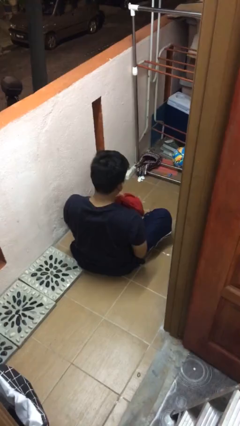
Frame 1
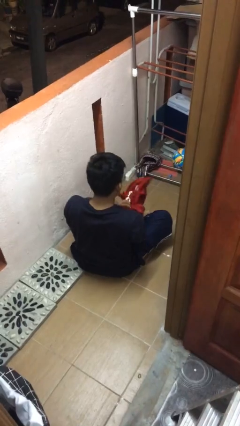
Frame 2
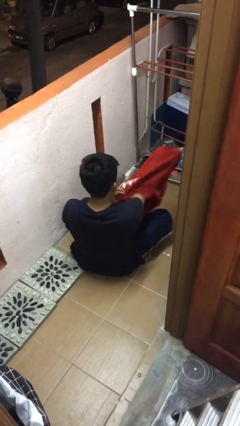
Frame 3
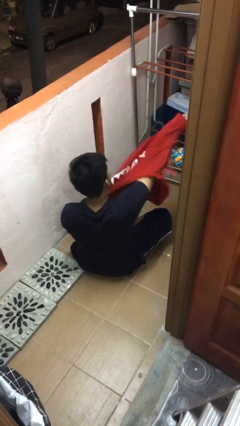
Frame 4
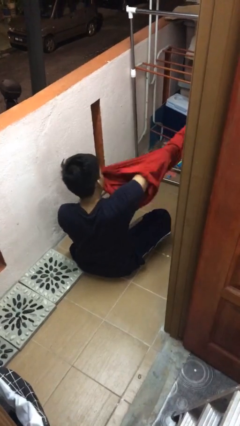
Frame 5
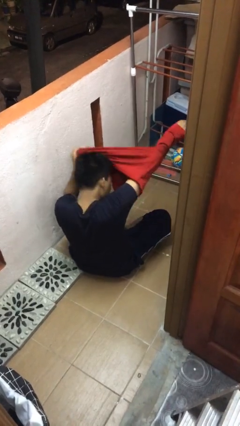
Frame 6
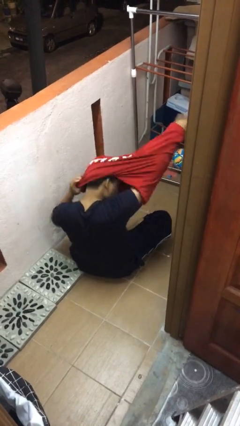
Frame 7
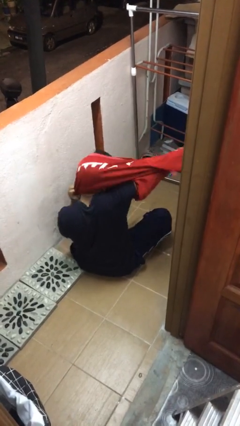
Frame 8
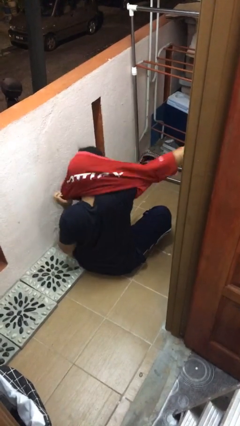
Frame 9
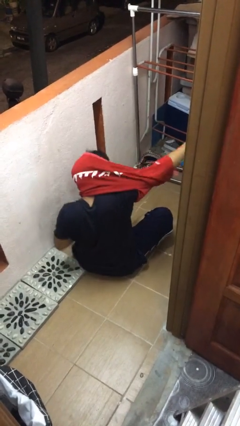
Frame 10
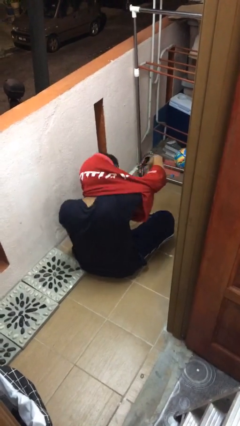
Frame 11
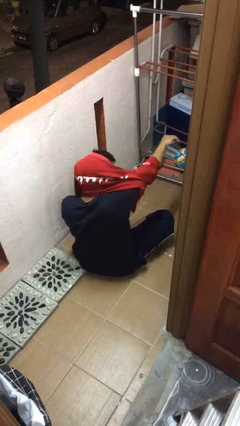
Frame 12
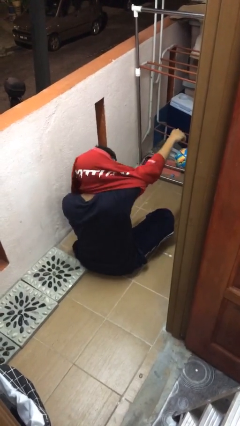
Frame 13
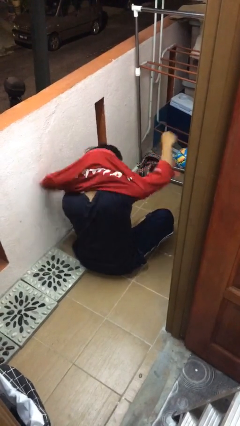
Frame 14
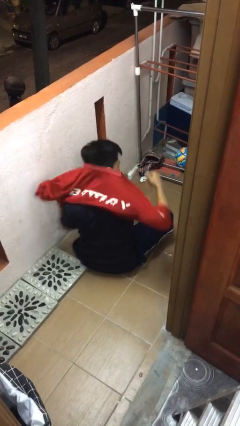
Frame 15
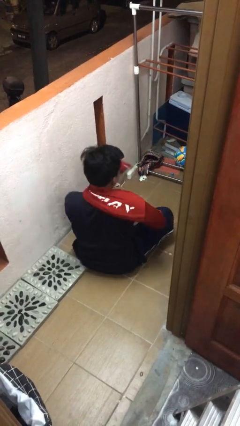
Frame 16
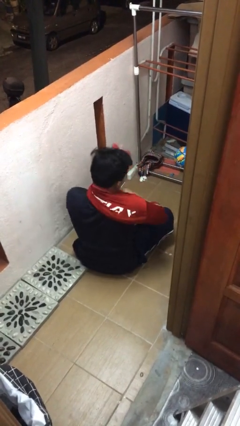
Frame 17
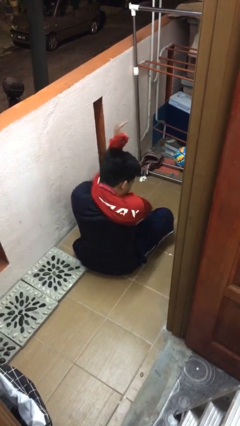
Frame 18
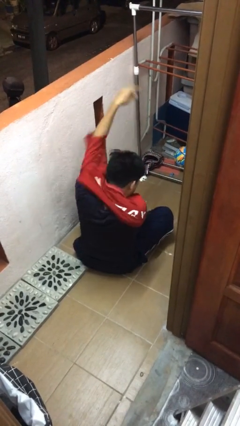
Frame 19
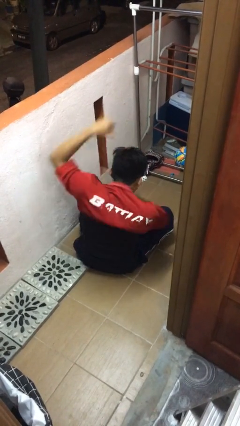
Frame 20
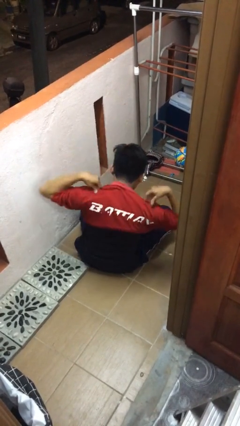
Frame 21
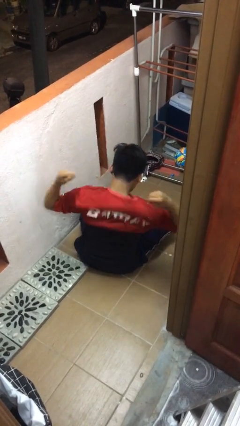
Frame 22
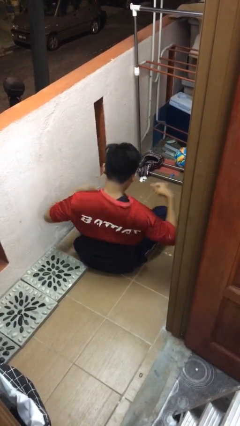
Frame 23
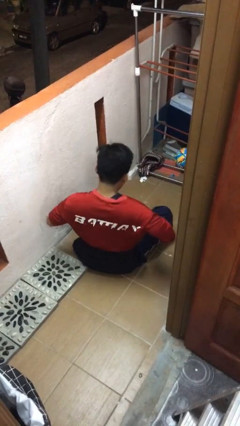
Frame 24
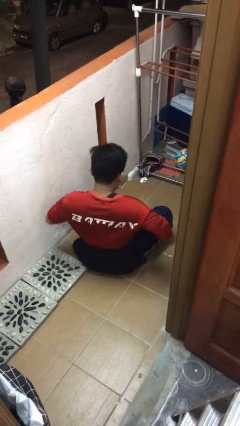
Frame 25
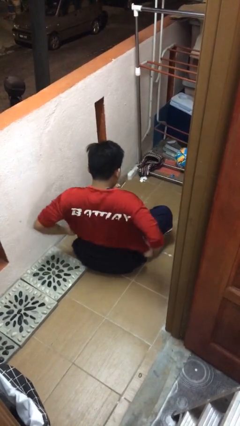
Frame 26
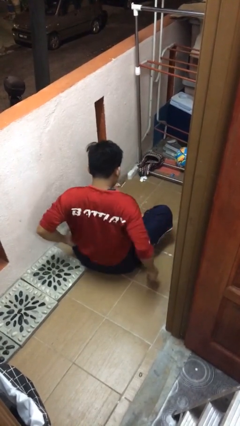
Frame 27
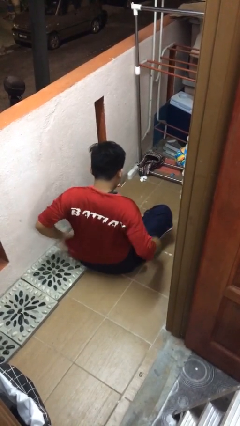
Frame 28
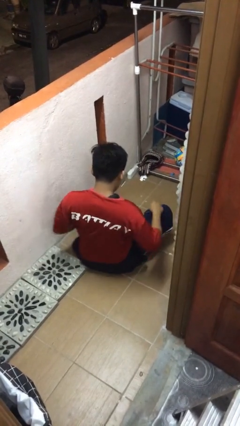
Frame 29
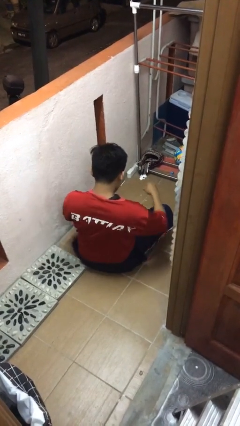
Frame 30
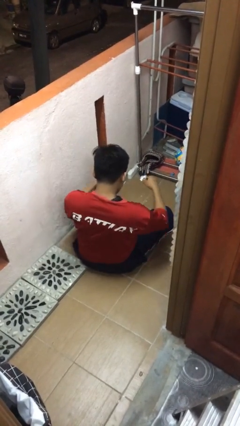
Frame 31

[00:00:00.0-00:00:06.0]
person puts on shirt

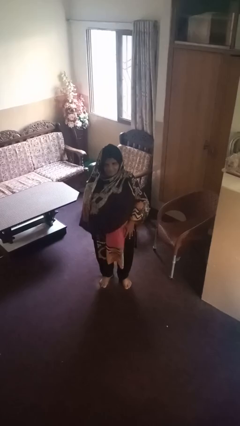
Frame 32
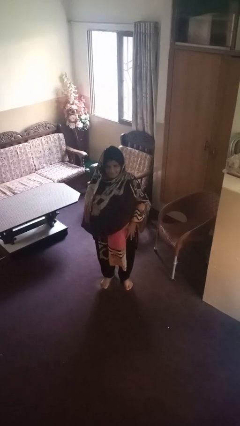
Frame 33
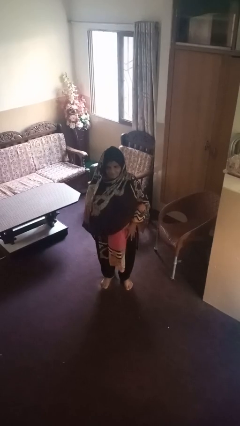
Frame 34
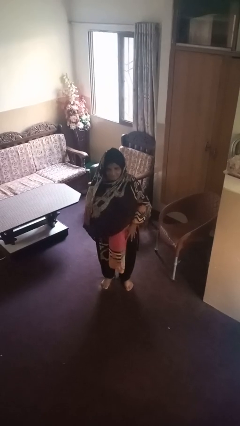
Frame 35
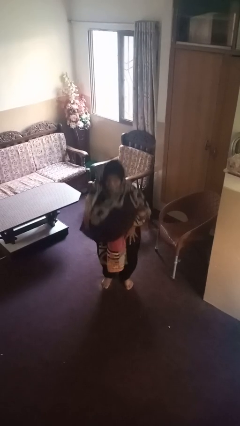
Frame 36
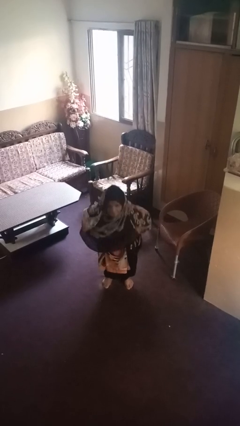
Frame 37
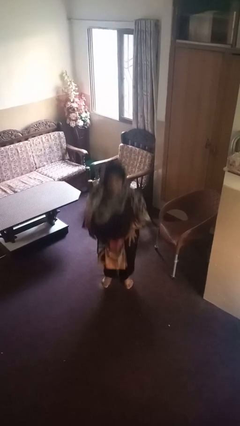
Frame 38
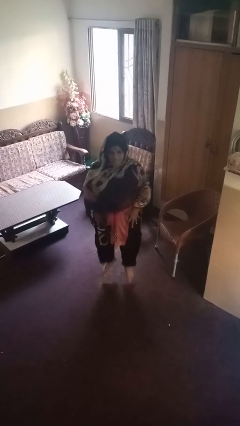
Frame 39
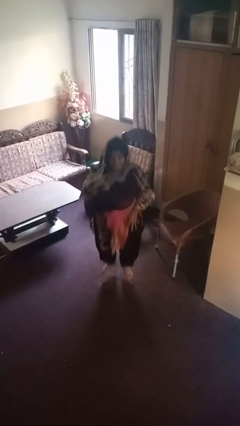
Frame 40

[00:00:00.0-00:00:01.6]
person jumps

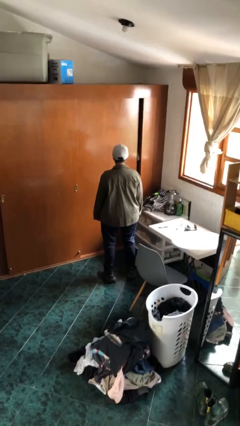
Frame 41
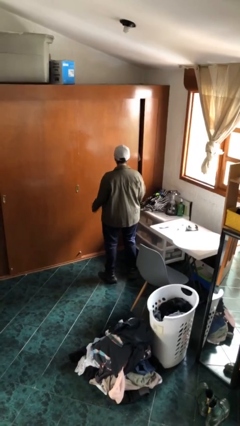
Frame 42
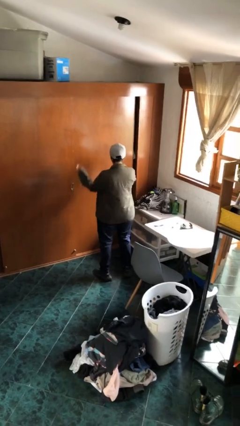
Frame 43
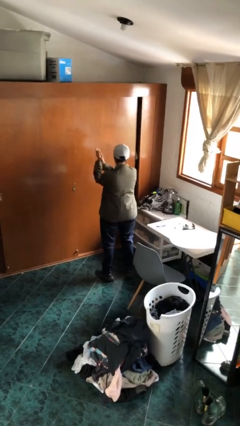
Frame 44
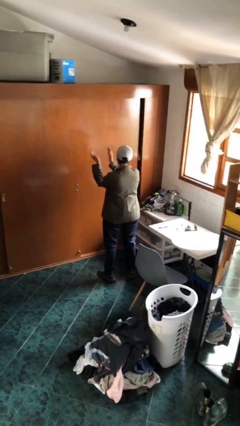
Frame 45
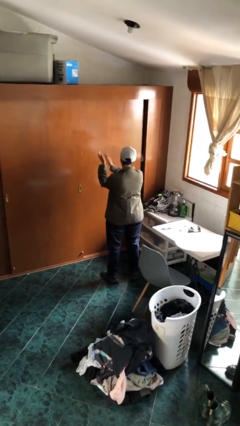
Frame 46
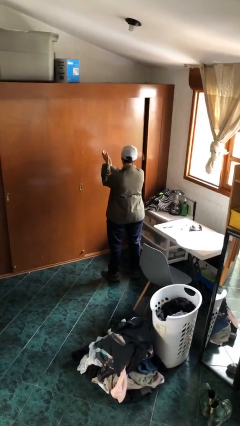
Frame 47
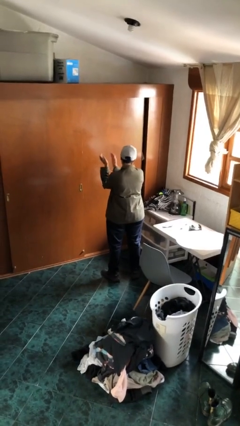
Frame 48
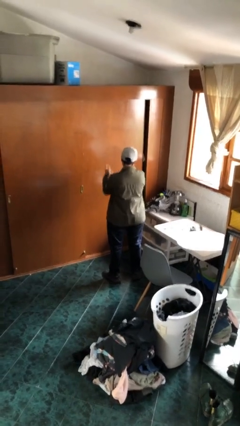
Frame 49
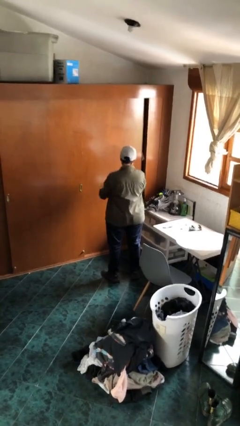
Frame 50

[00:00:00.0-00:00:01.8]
person claps hands

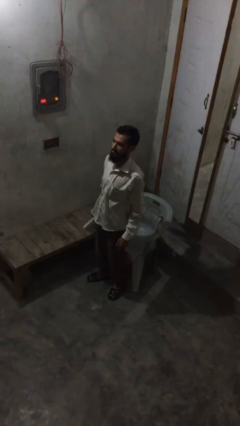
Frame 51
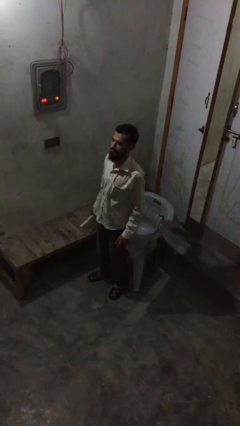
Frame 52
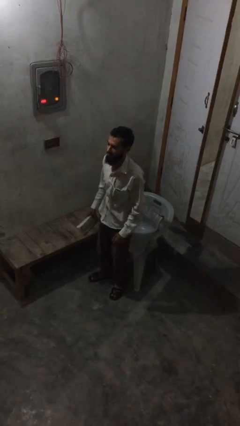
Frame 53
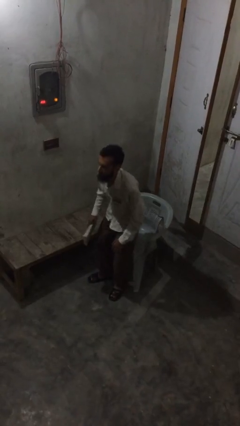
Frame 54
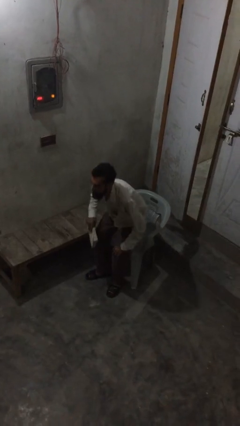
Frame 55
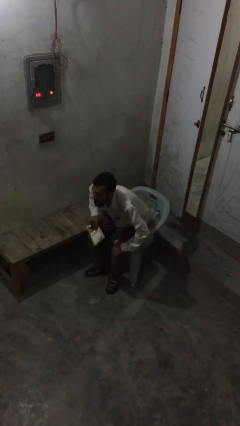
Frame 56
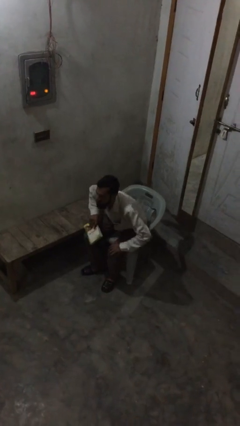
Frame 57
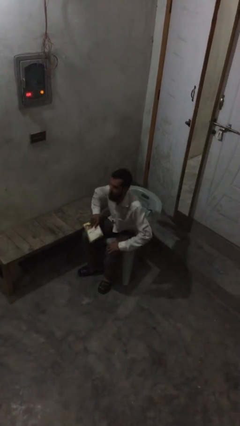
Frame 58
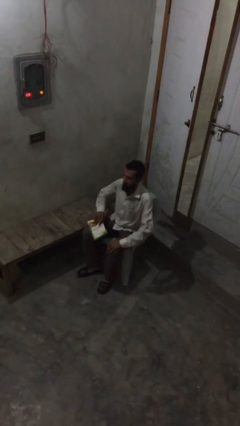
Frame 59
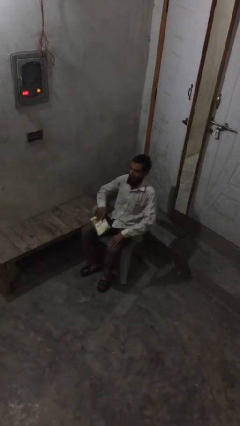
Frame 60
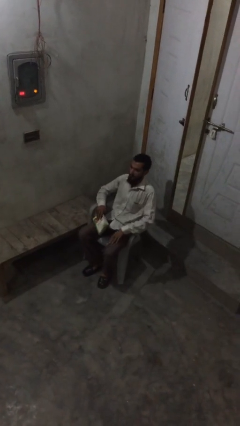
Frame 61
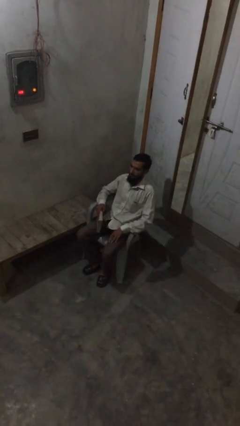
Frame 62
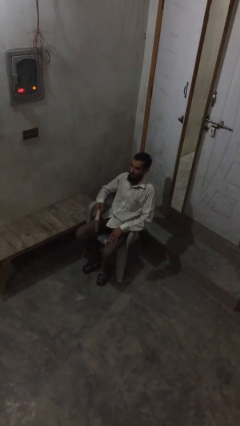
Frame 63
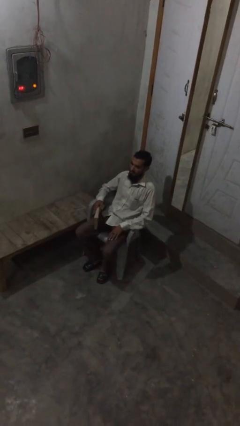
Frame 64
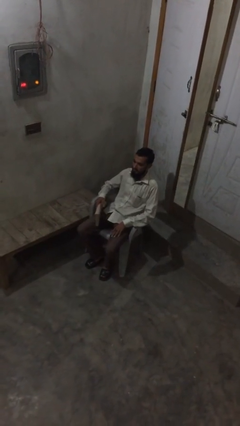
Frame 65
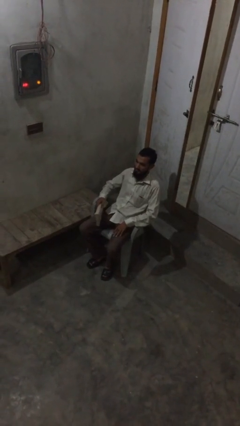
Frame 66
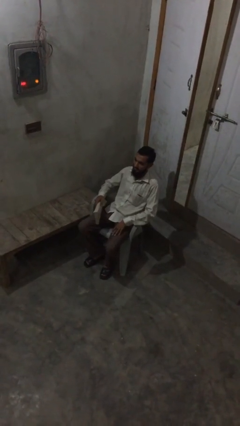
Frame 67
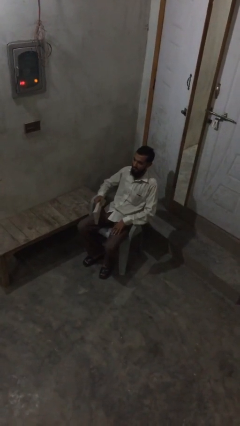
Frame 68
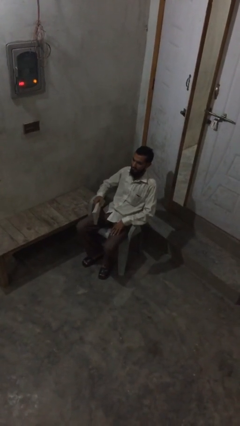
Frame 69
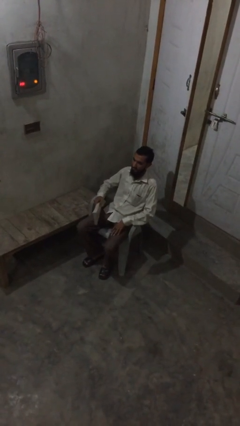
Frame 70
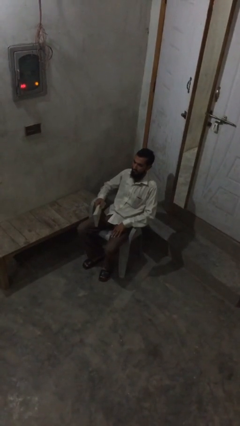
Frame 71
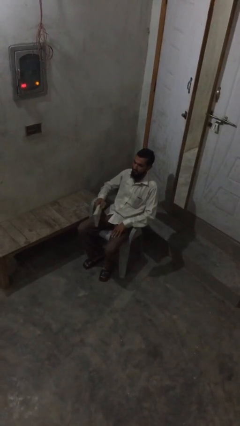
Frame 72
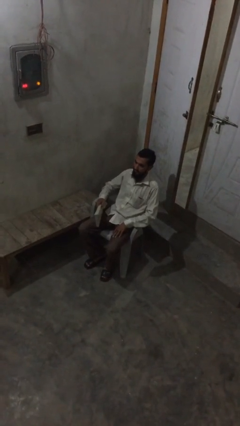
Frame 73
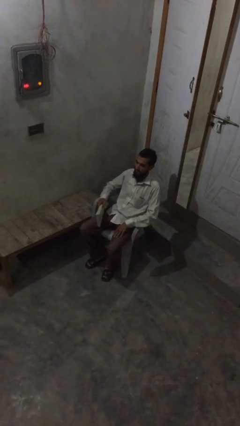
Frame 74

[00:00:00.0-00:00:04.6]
person sits down

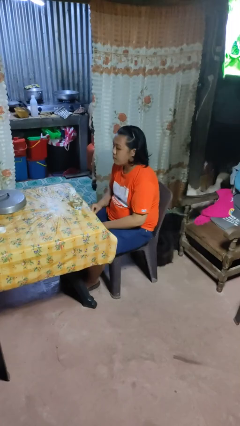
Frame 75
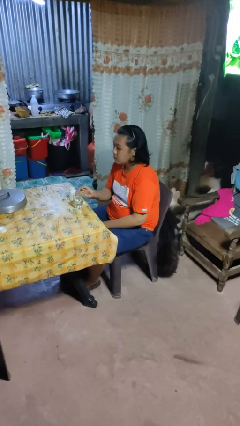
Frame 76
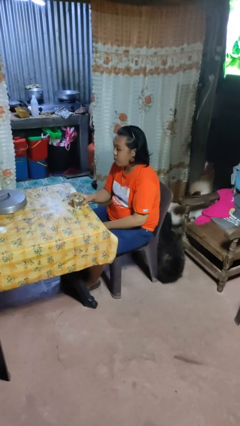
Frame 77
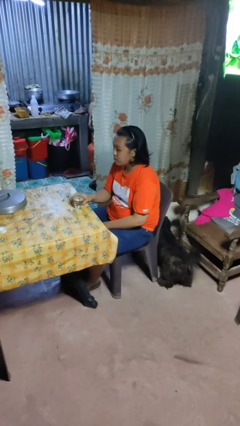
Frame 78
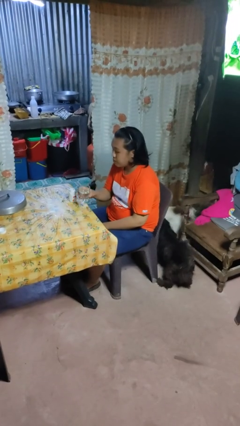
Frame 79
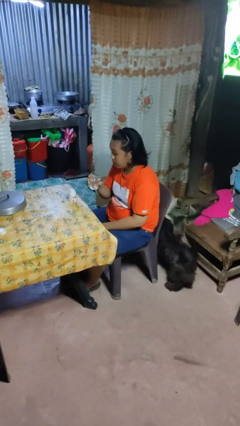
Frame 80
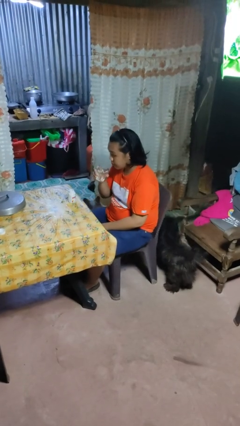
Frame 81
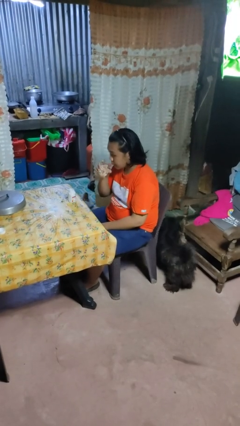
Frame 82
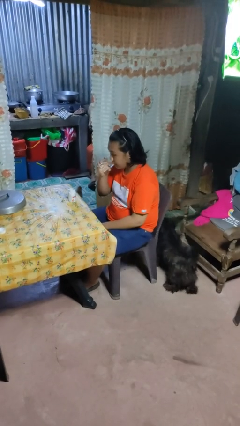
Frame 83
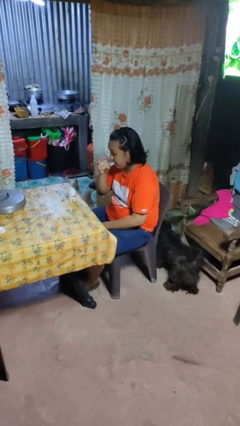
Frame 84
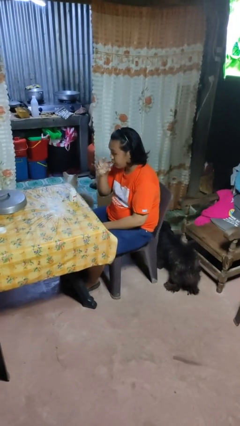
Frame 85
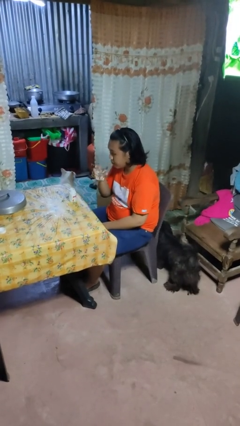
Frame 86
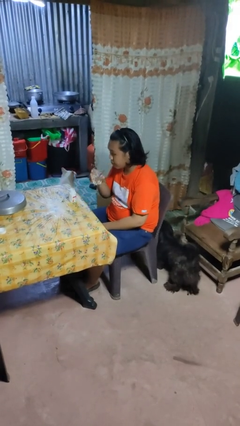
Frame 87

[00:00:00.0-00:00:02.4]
person drinks from cup

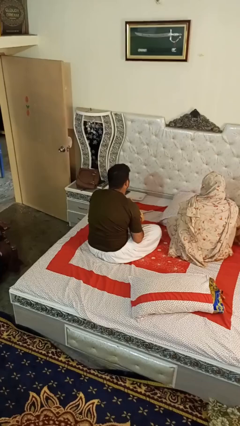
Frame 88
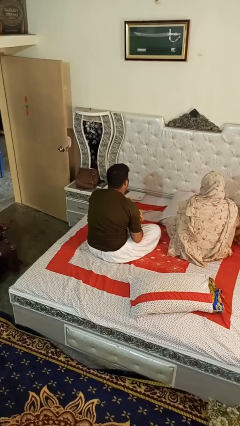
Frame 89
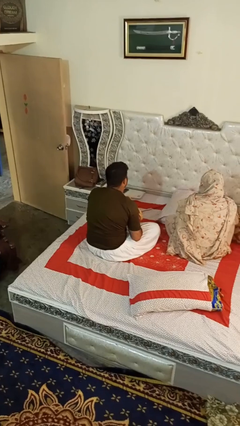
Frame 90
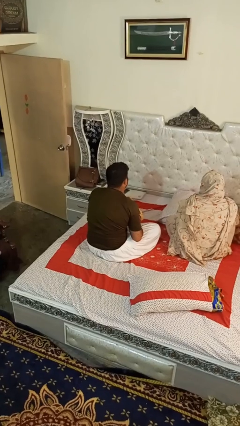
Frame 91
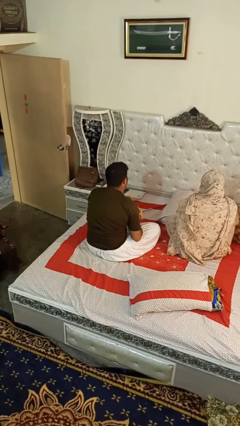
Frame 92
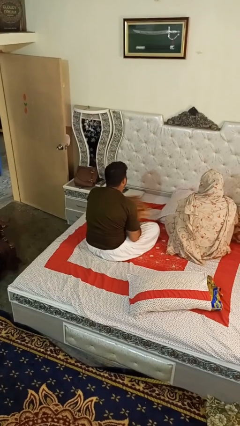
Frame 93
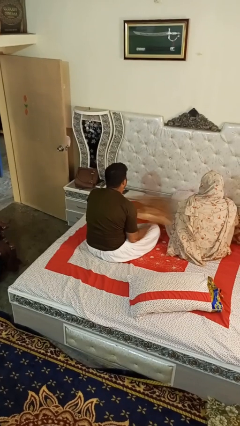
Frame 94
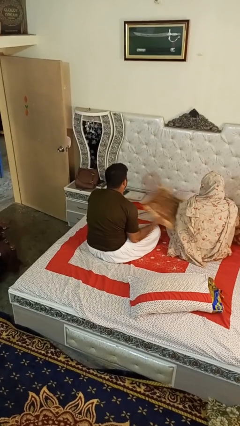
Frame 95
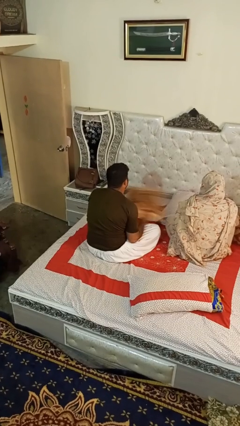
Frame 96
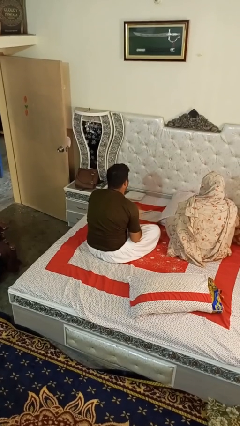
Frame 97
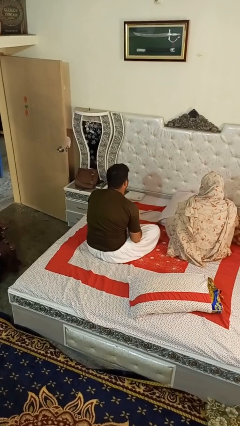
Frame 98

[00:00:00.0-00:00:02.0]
person hits person with pillow
